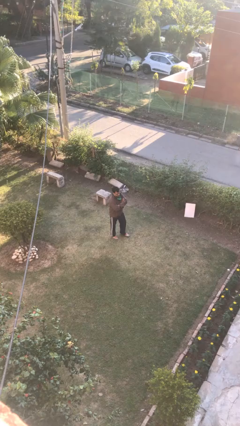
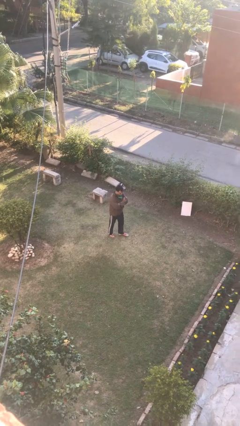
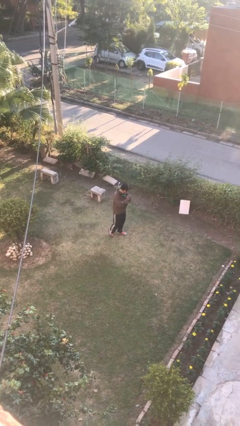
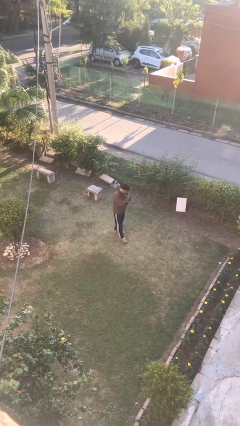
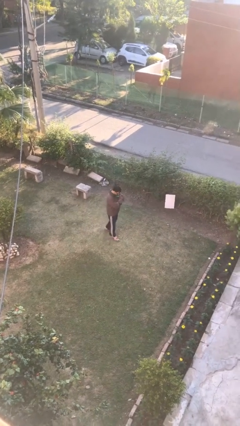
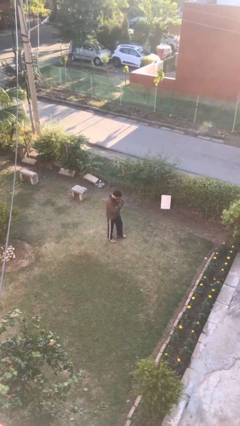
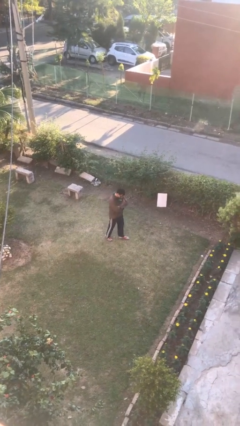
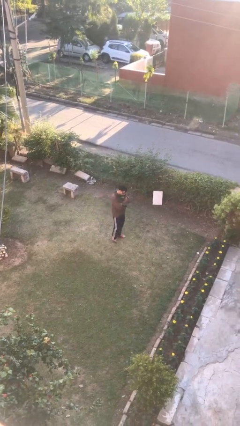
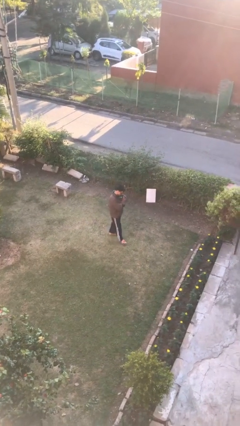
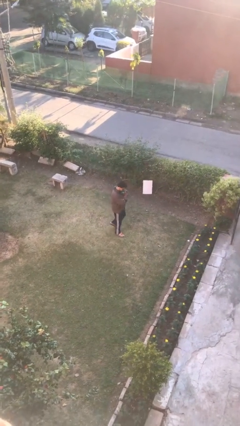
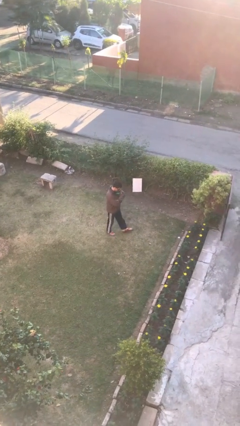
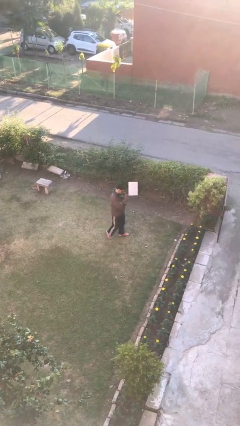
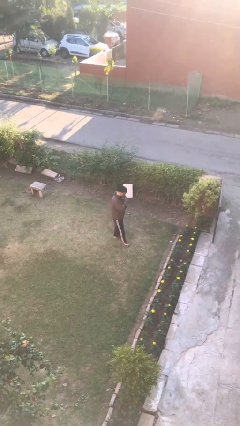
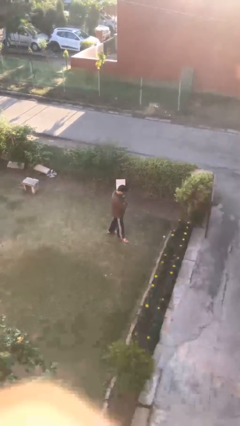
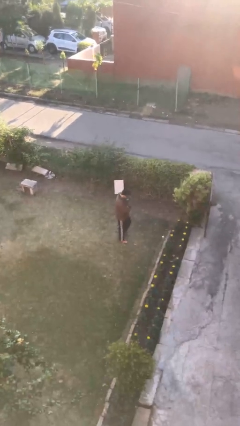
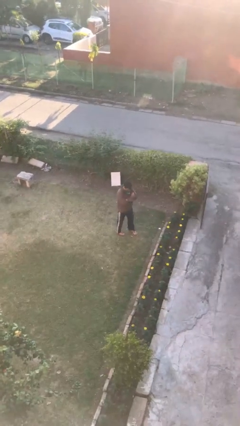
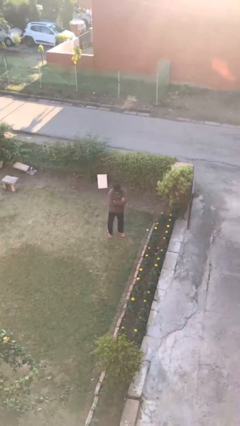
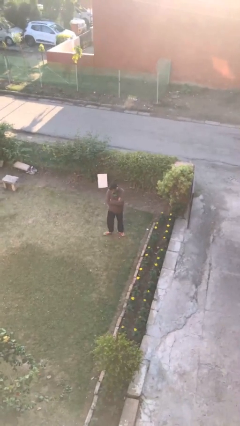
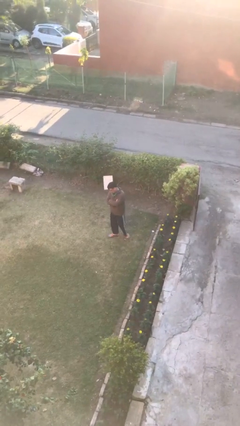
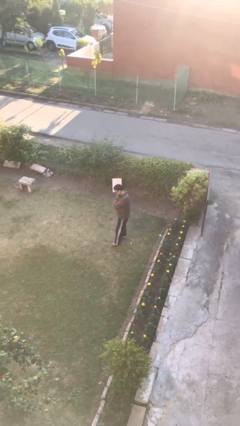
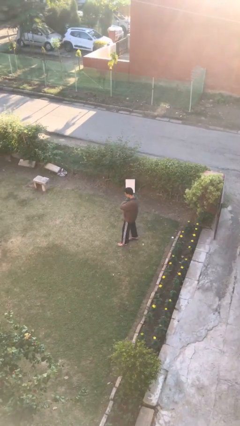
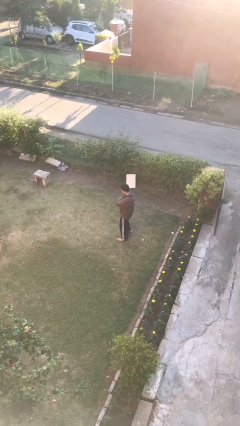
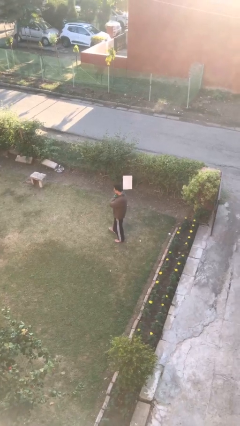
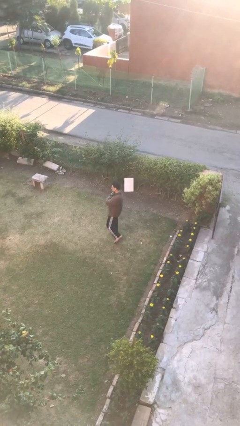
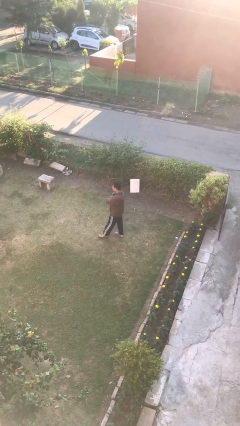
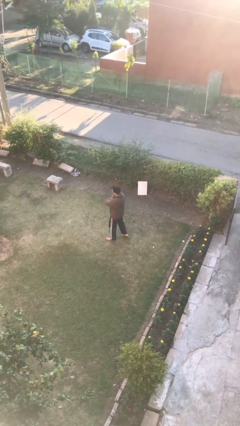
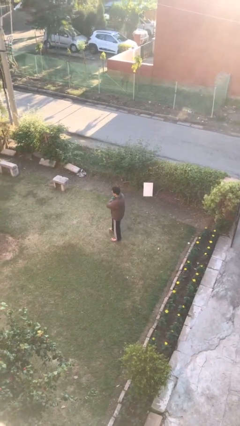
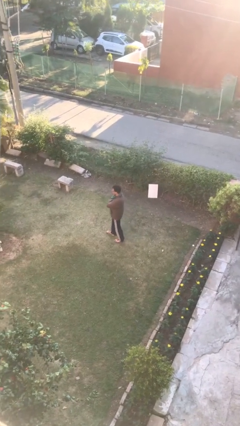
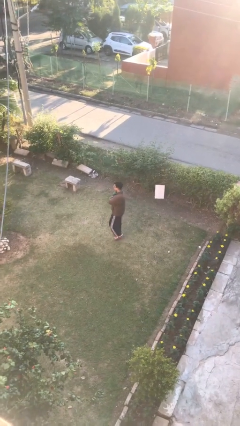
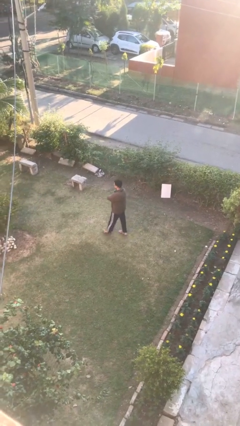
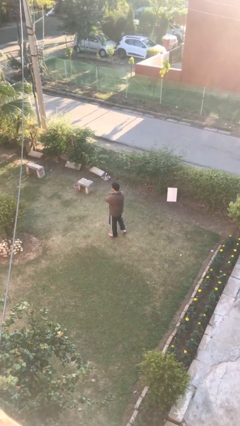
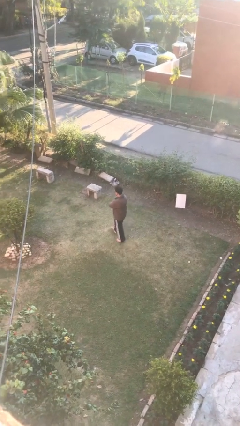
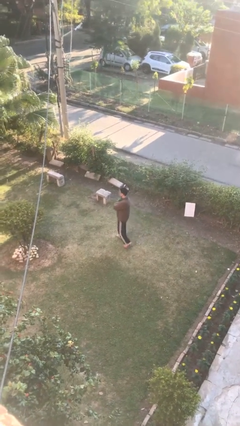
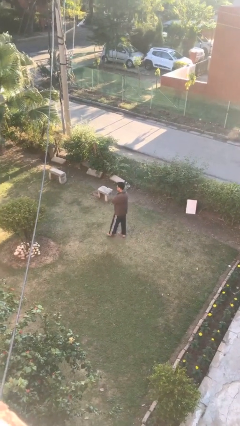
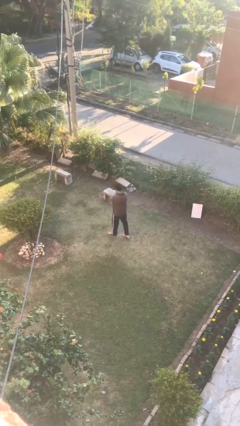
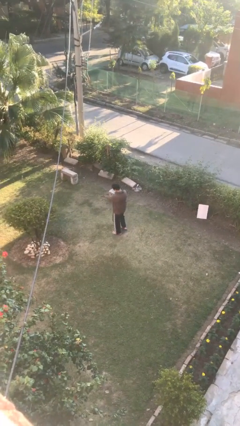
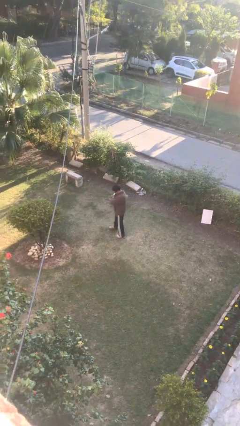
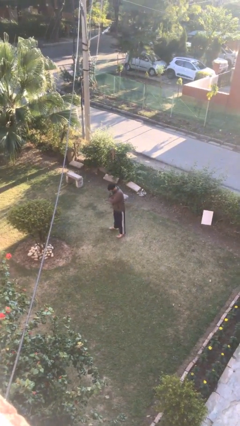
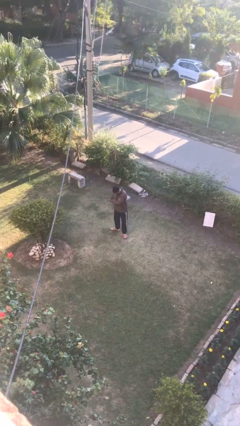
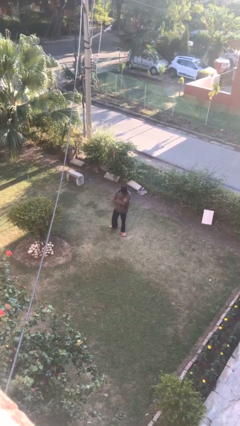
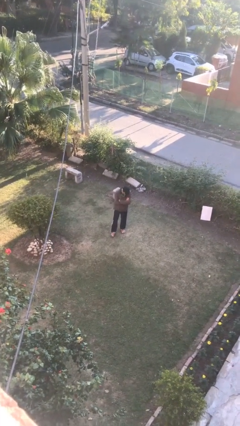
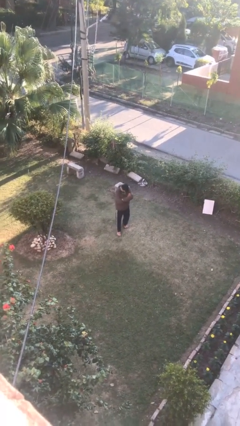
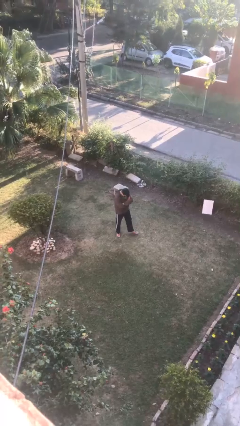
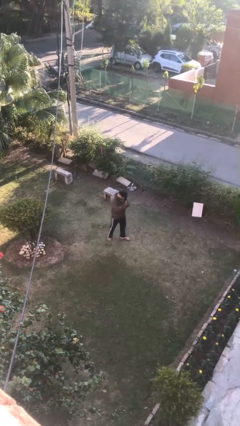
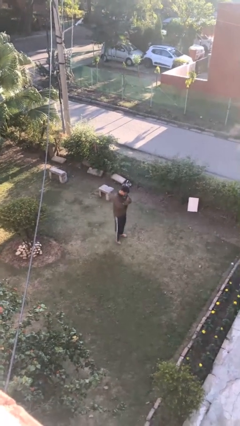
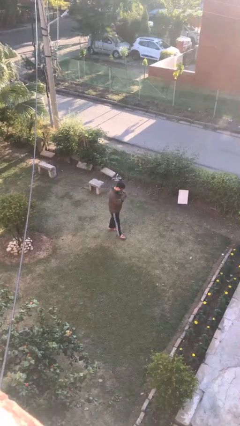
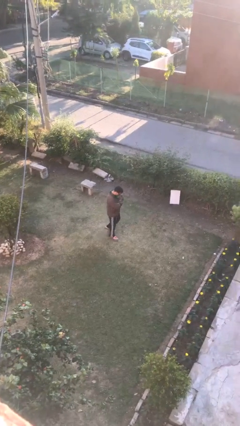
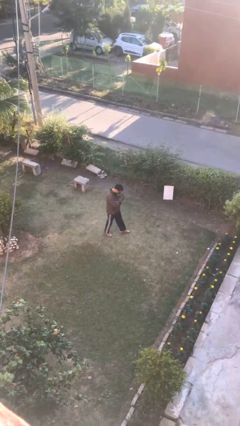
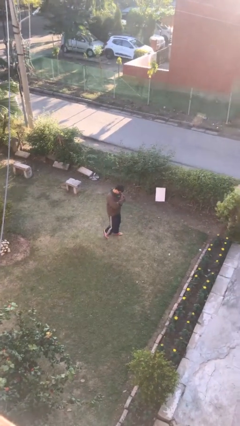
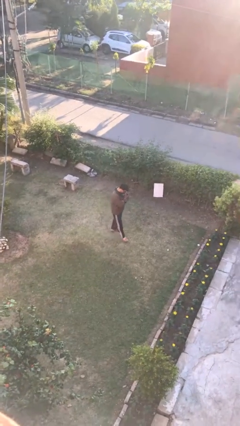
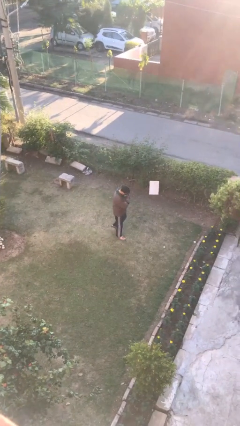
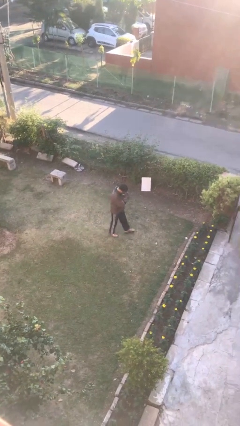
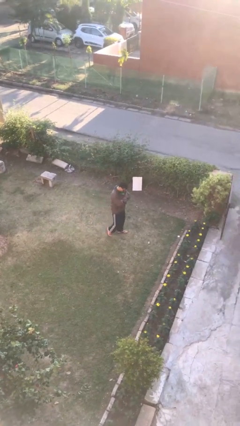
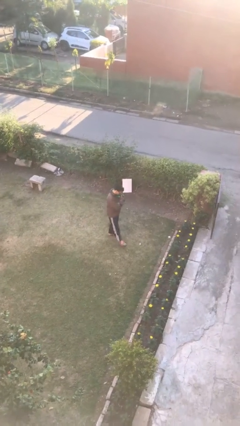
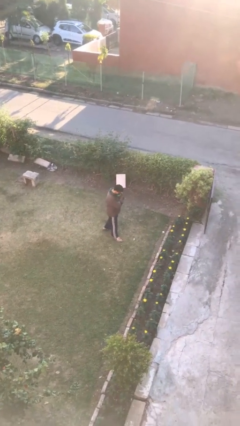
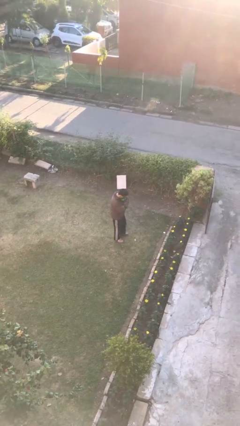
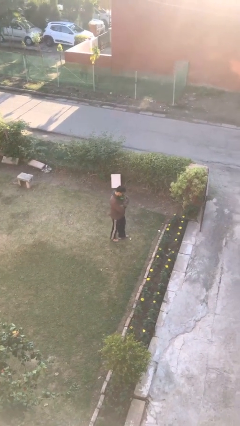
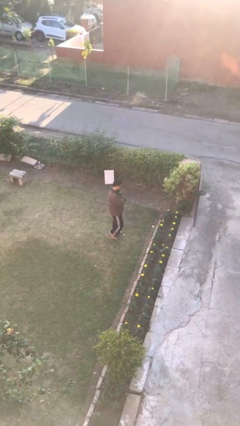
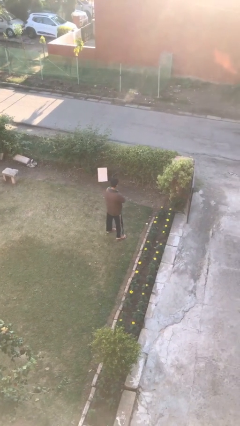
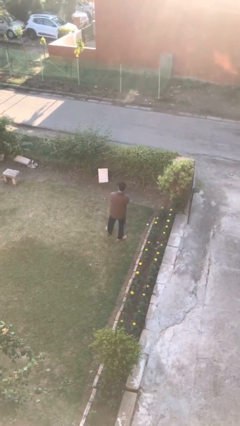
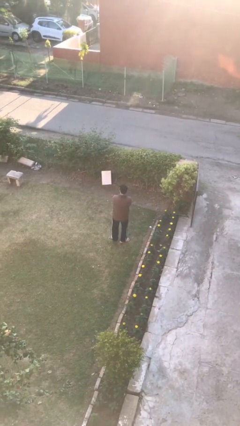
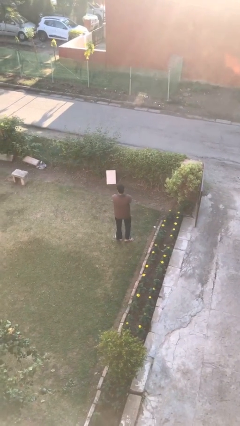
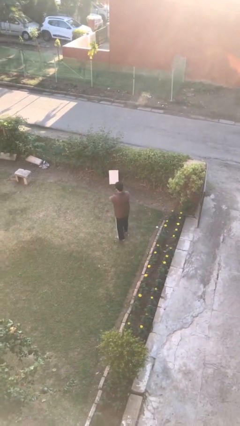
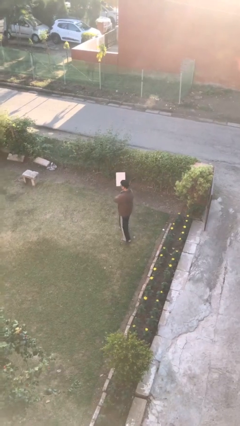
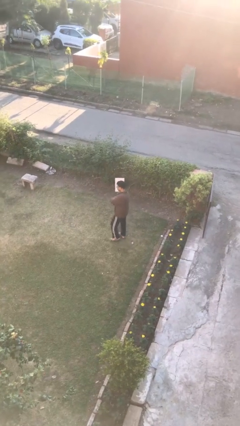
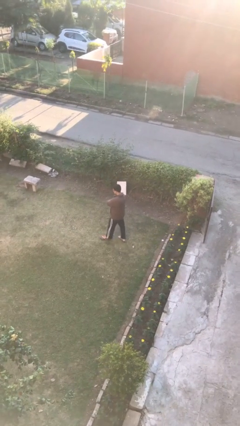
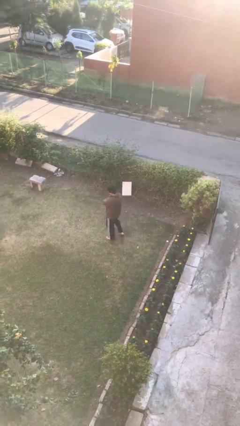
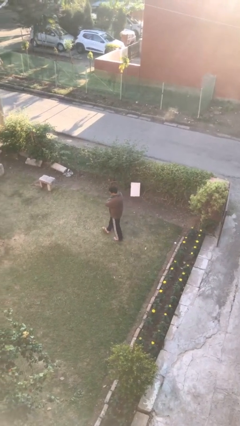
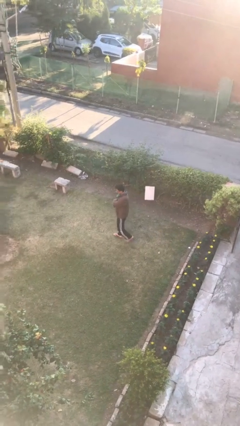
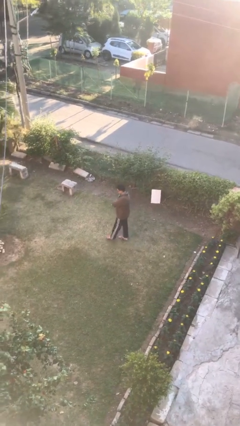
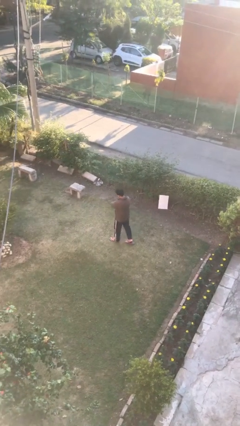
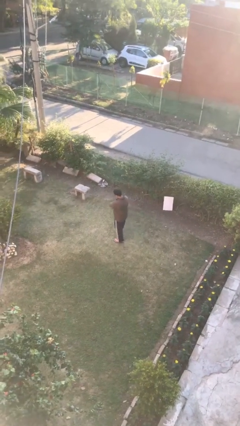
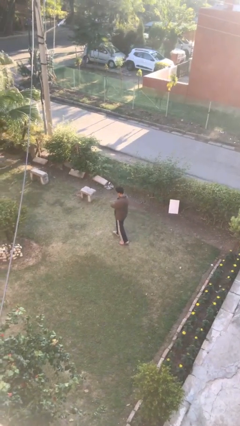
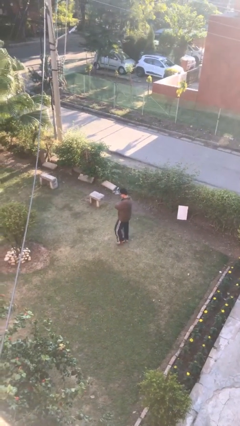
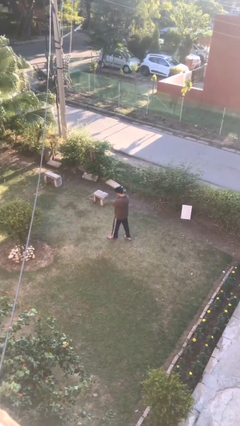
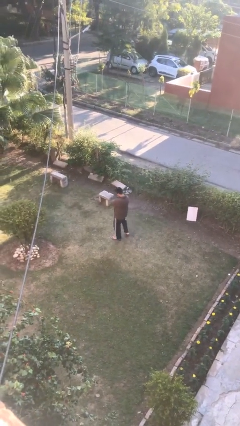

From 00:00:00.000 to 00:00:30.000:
person walks

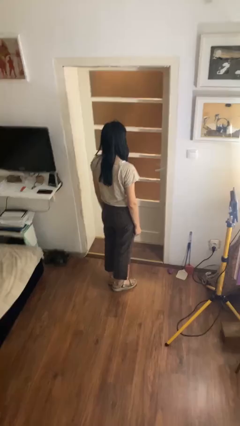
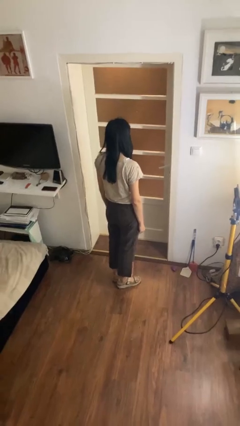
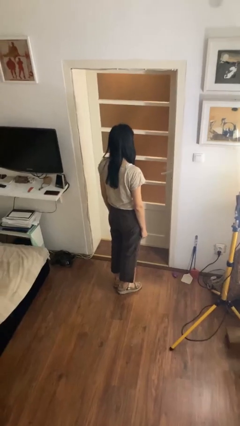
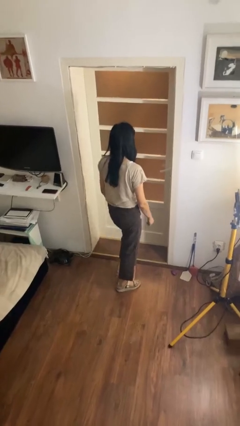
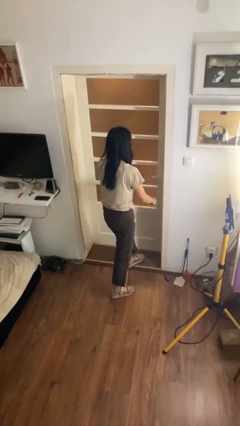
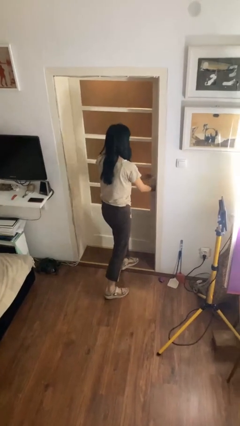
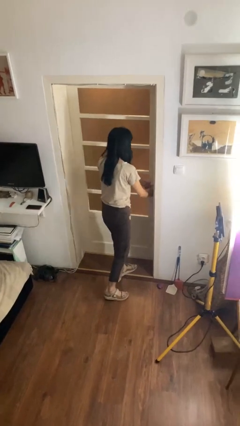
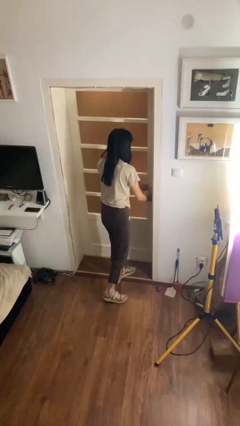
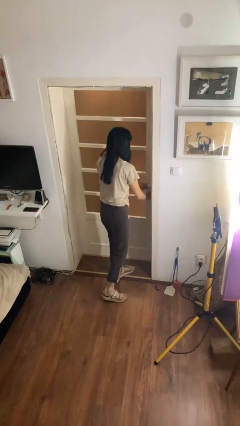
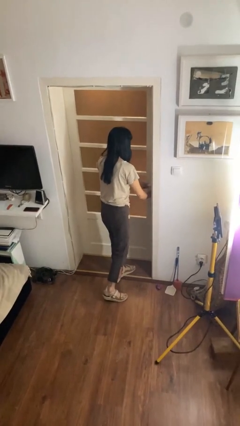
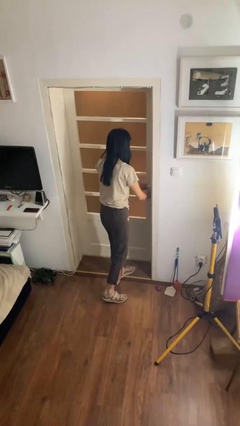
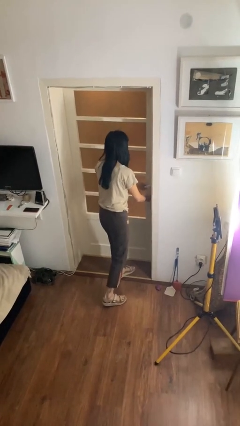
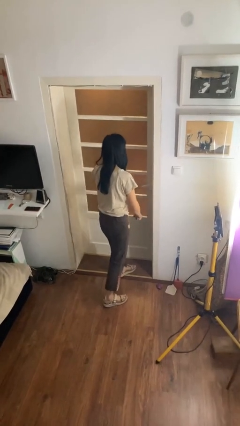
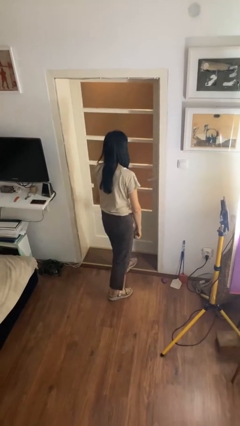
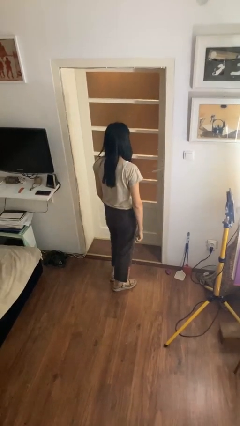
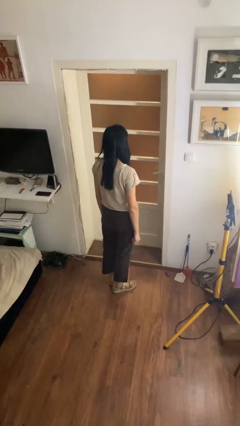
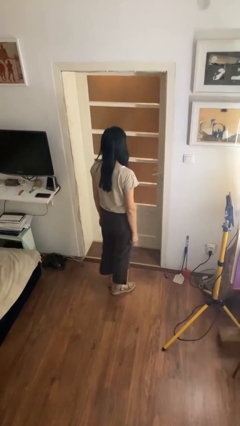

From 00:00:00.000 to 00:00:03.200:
person unlocks door with keys
